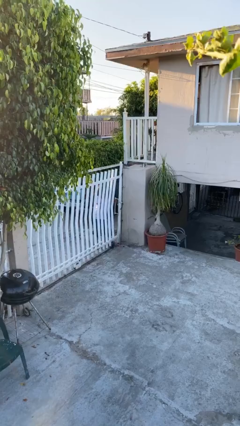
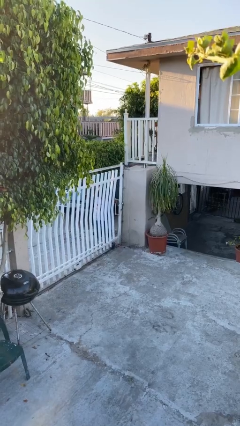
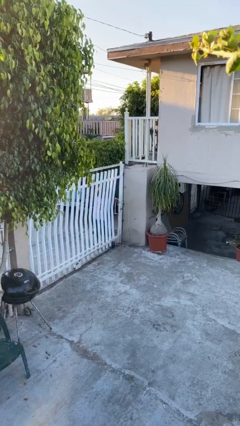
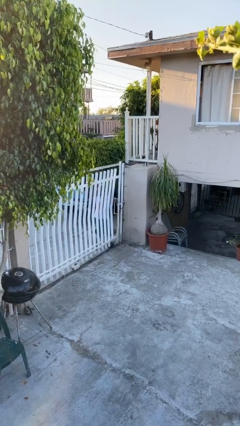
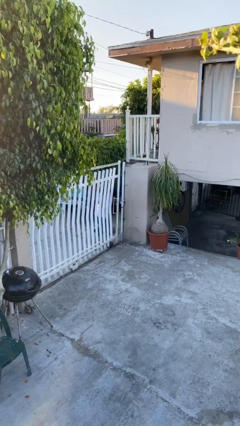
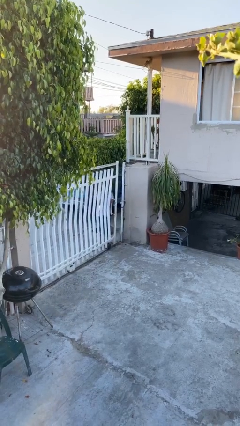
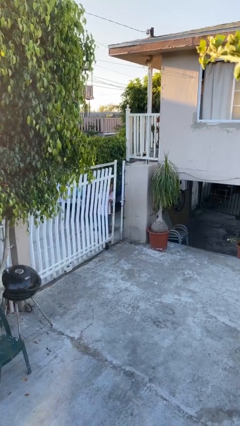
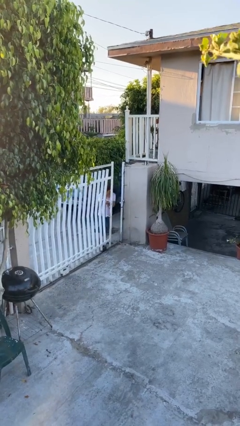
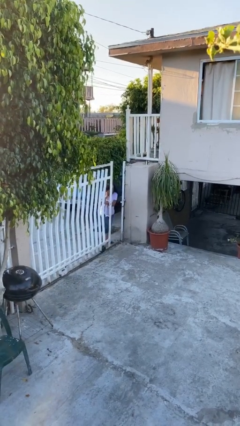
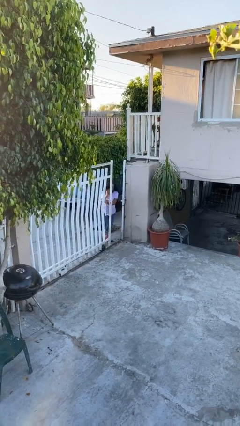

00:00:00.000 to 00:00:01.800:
person opens facility door

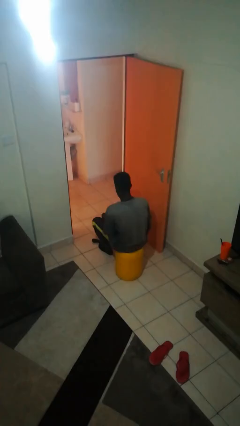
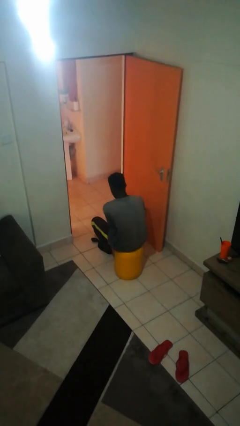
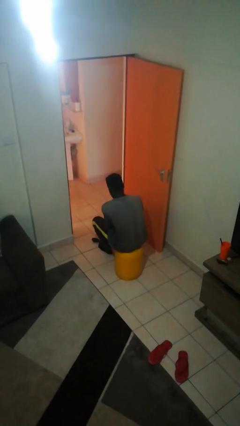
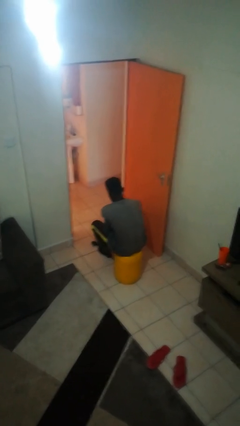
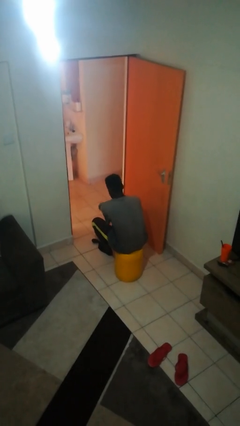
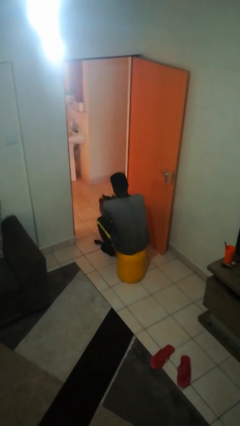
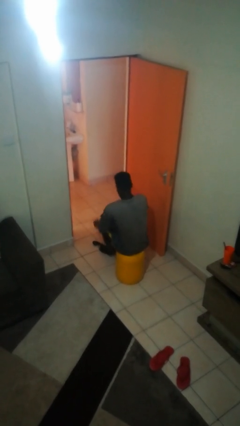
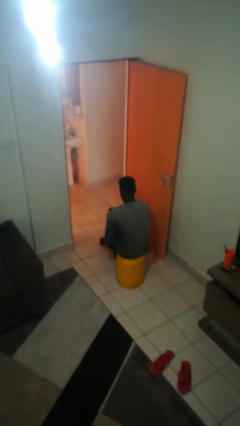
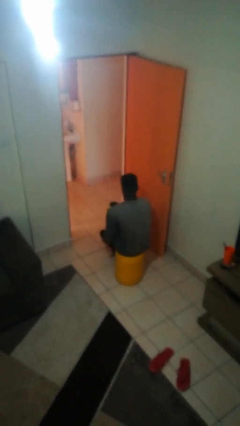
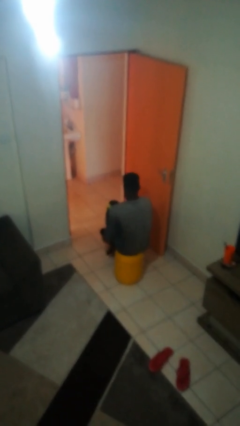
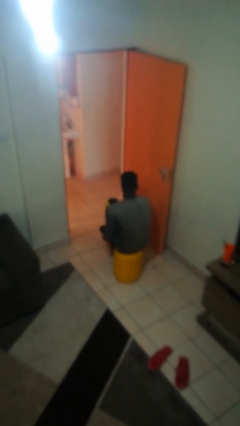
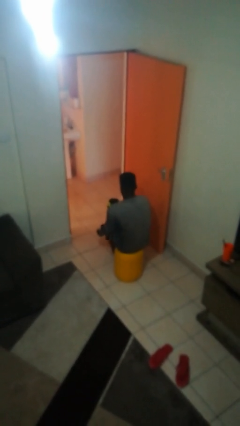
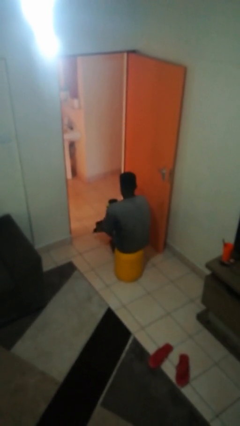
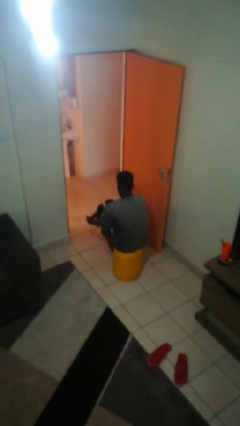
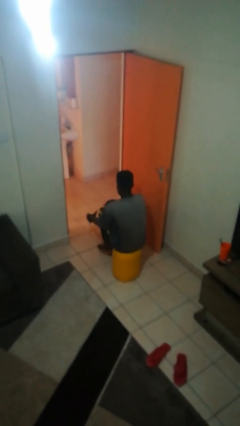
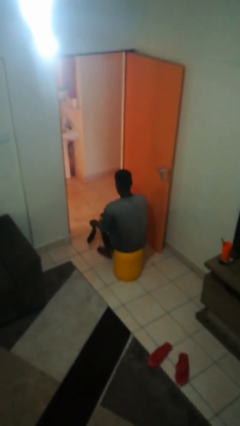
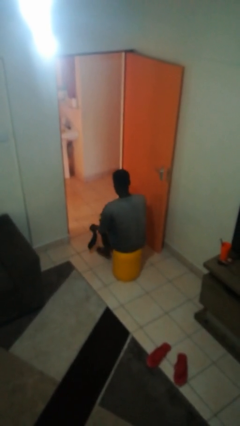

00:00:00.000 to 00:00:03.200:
person takes off socks

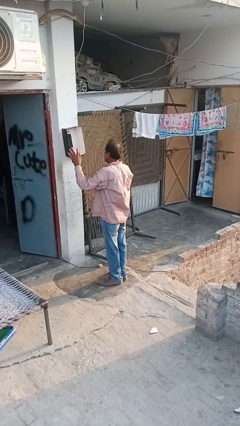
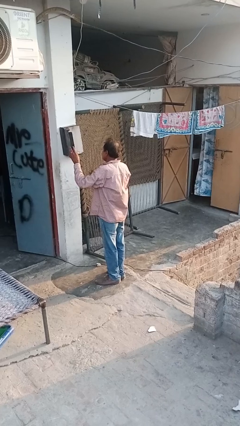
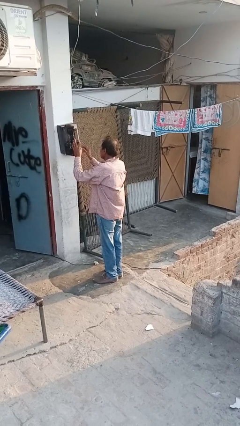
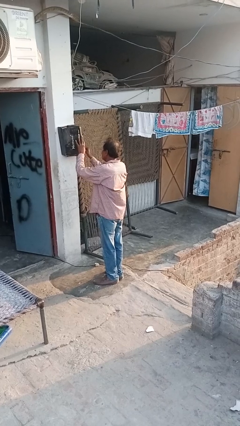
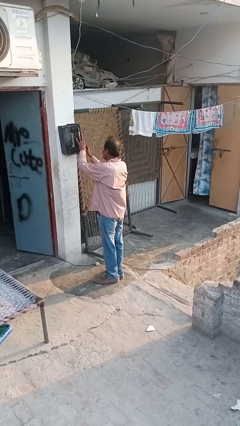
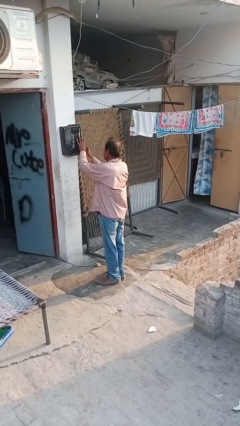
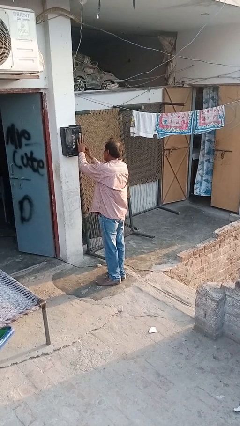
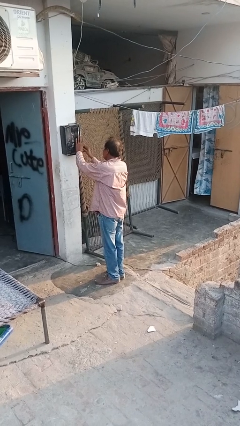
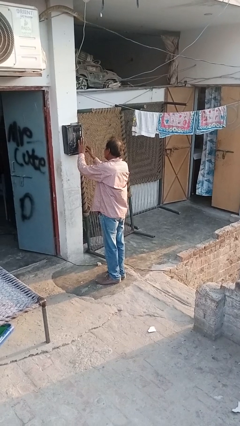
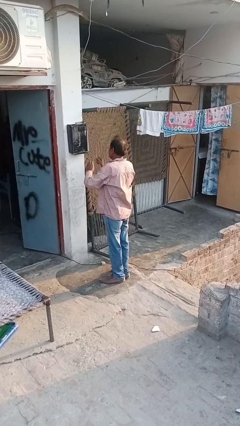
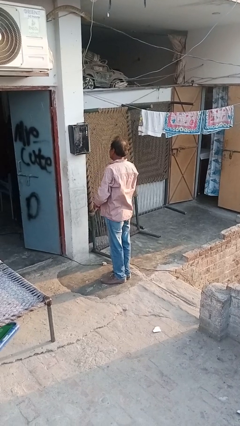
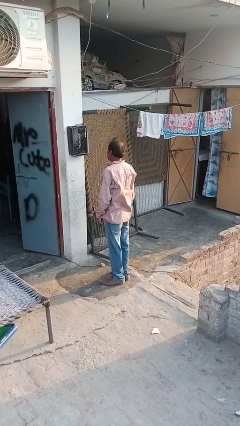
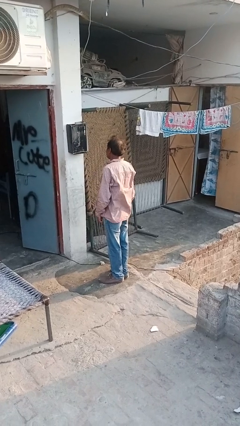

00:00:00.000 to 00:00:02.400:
person closes mailbox

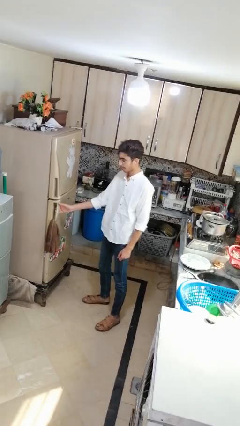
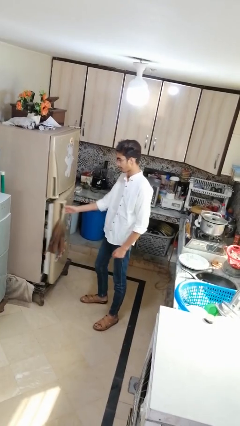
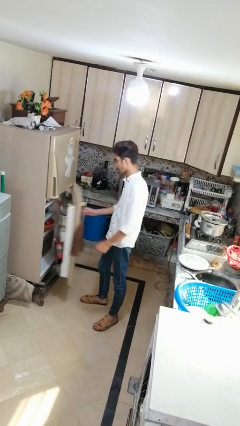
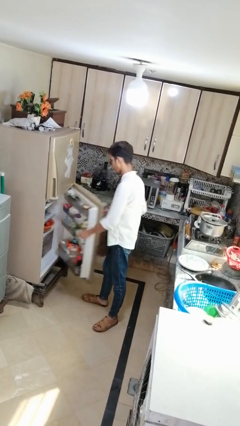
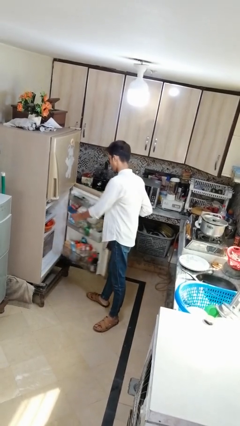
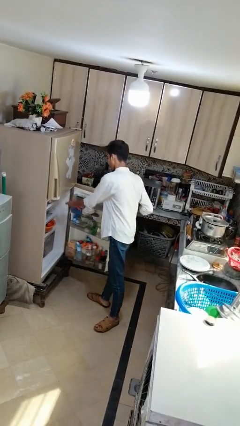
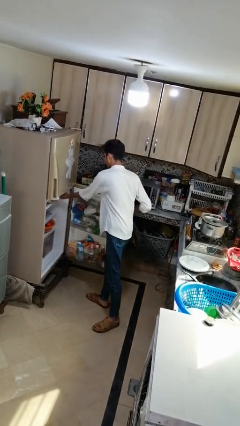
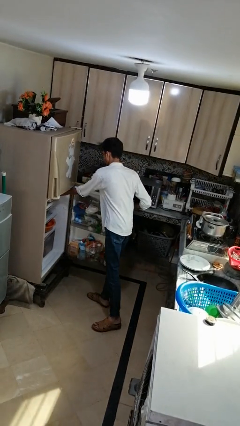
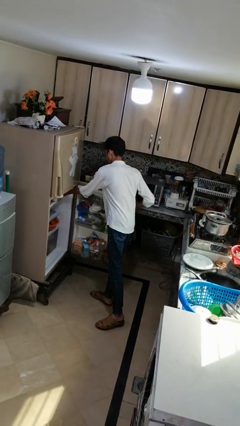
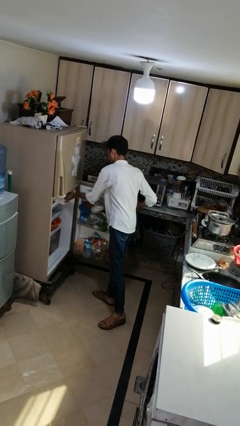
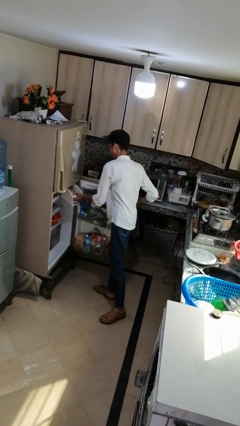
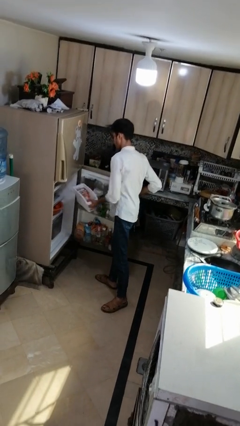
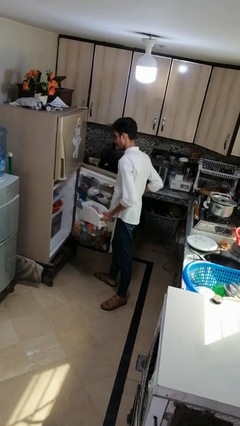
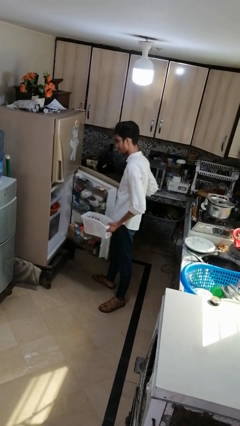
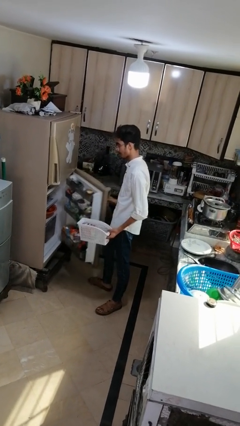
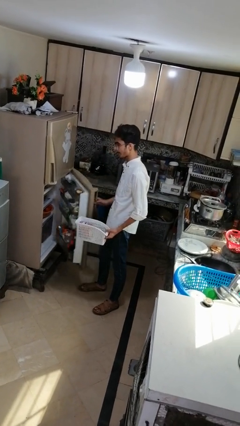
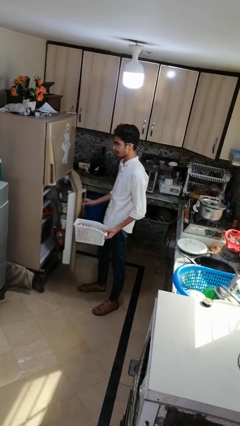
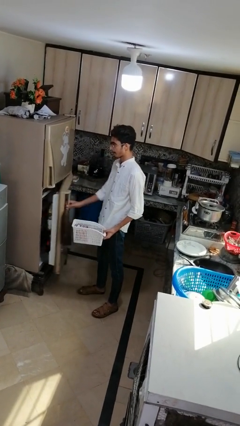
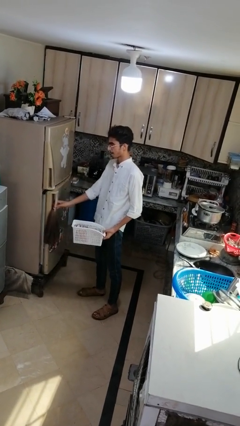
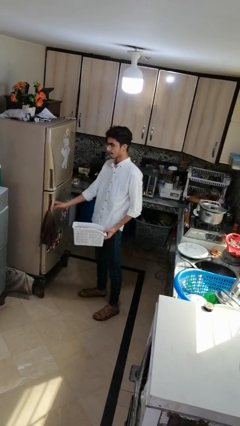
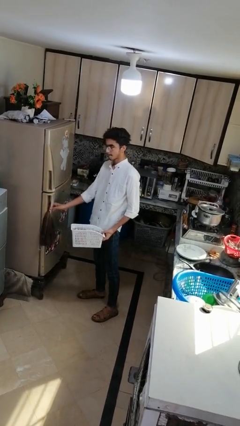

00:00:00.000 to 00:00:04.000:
person takes object from refrigerator

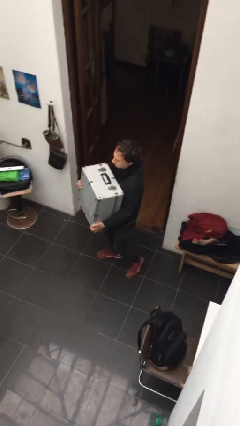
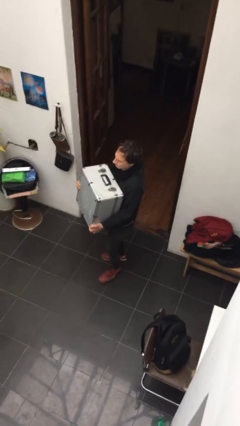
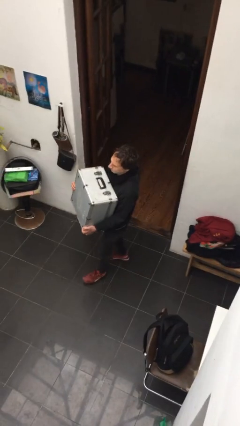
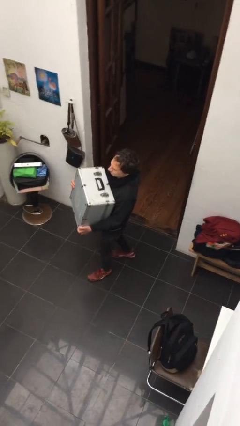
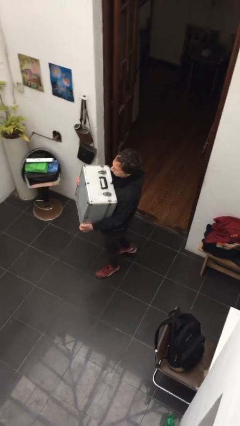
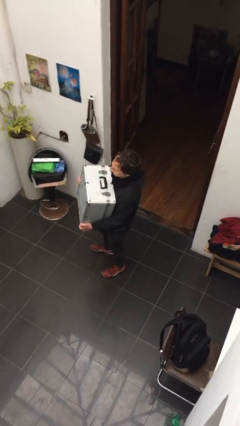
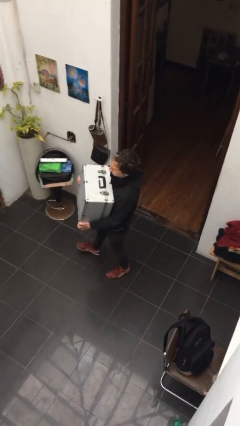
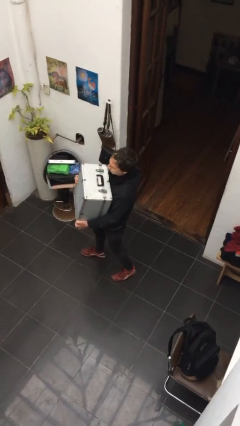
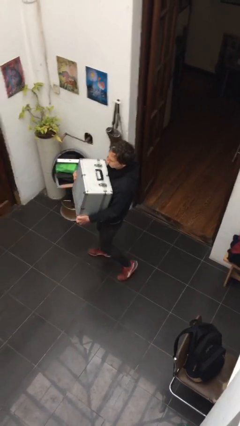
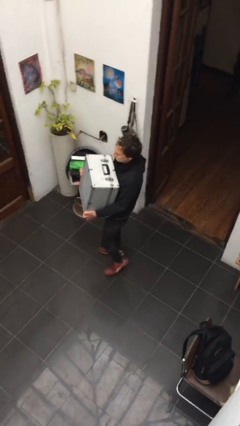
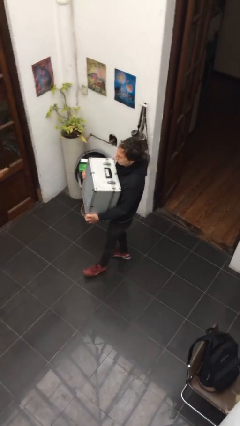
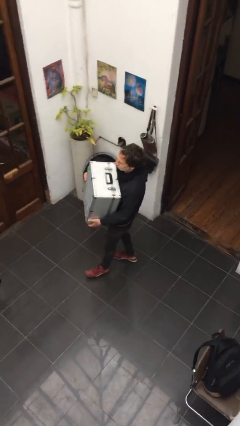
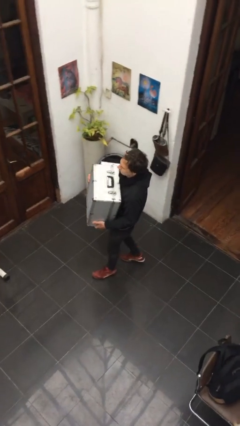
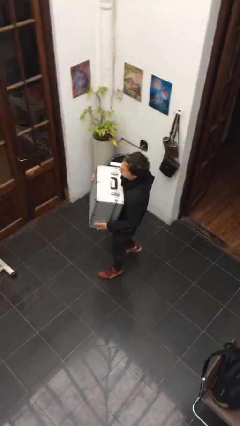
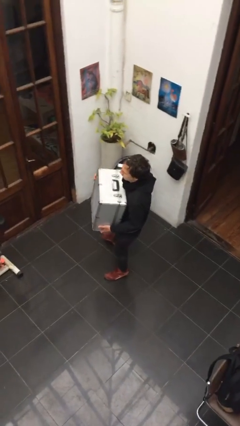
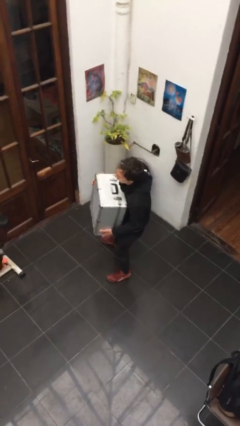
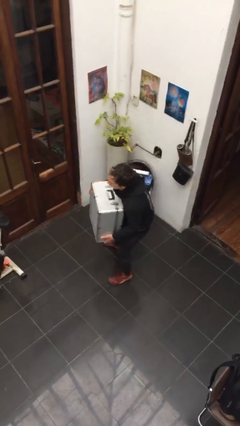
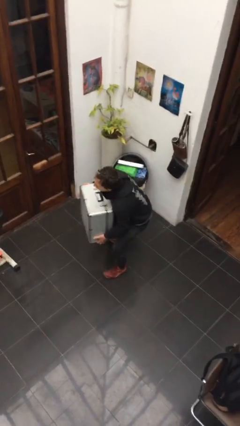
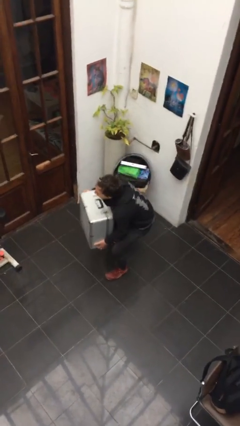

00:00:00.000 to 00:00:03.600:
person carries heavy object

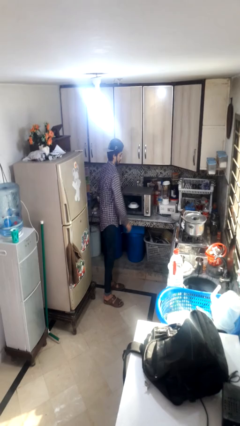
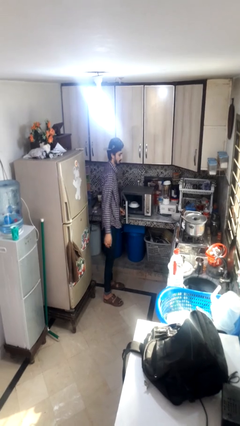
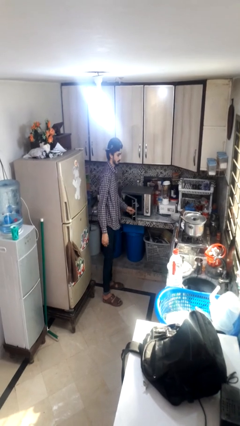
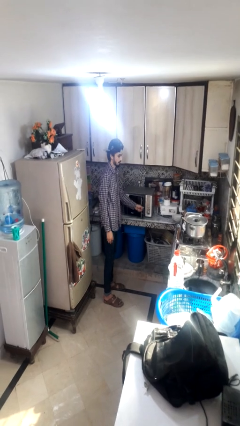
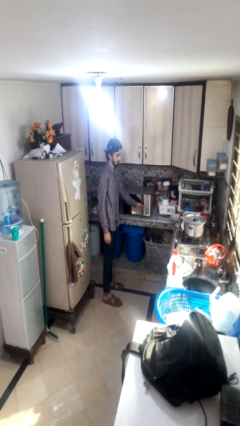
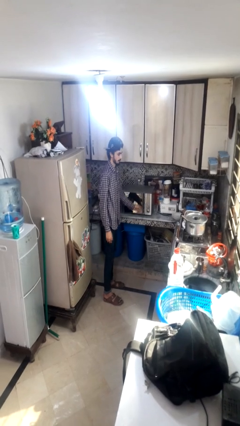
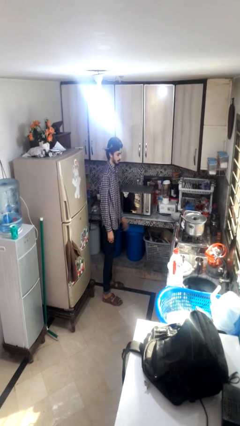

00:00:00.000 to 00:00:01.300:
person closes microwave

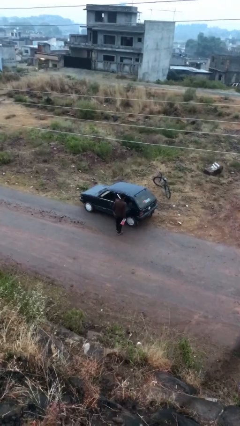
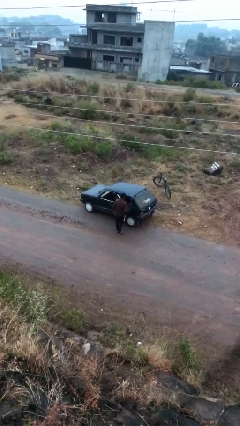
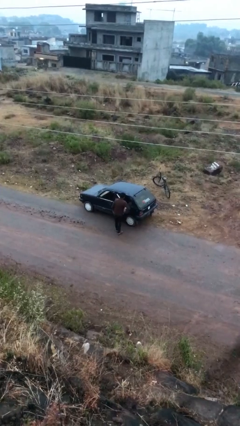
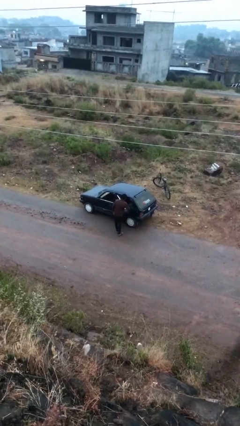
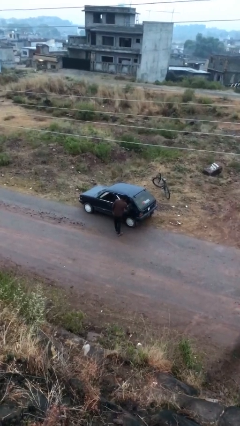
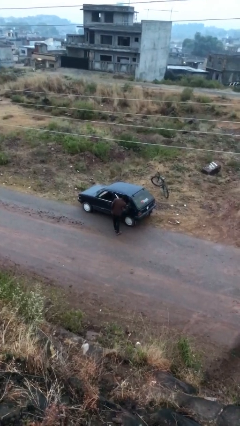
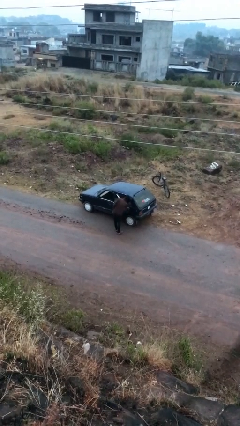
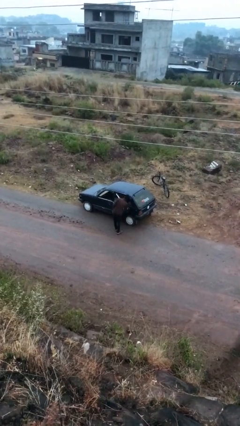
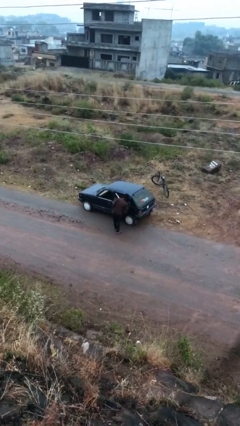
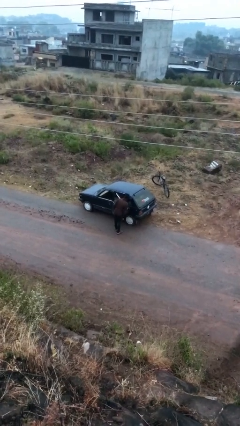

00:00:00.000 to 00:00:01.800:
person loads car
